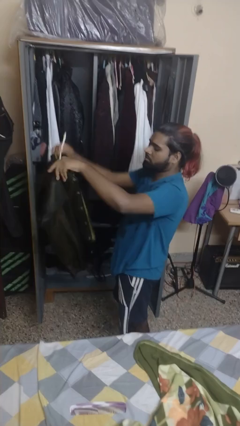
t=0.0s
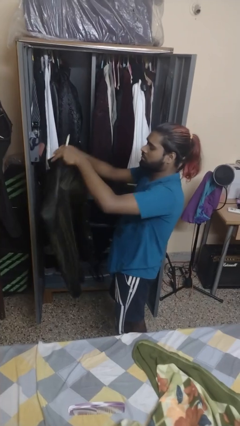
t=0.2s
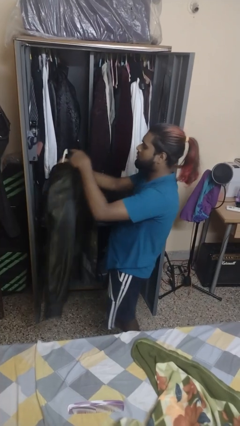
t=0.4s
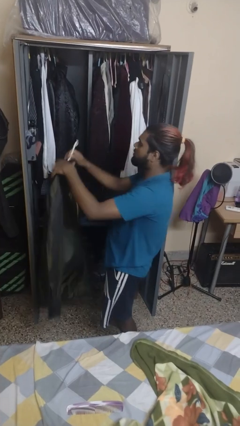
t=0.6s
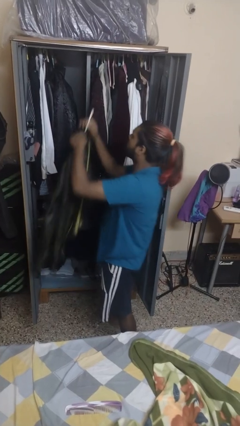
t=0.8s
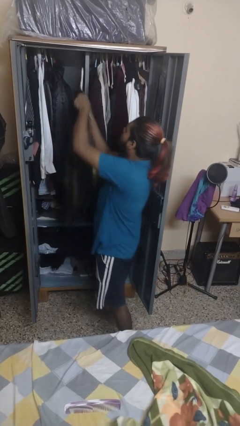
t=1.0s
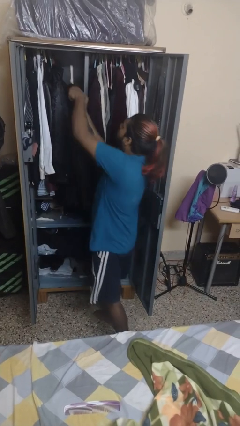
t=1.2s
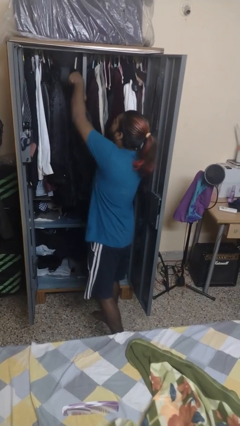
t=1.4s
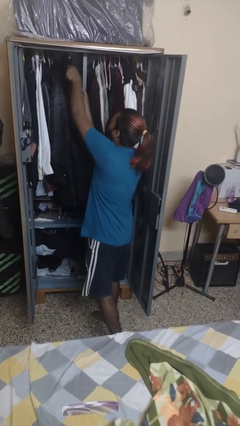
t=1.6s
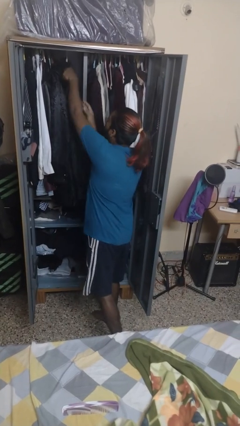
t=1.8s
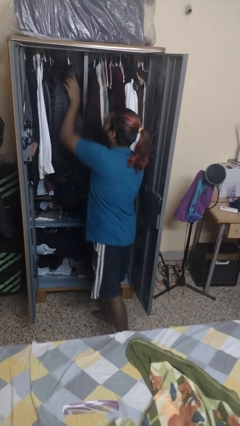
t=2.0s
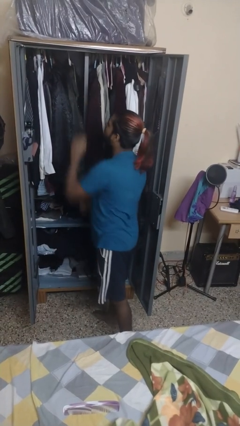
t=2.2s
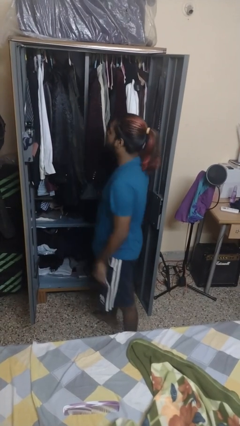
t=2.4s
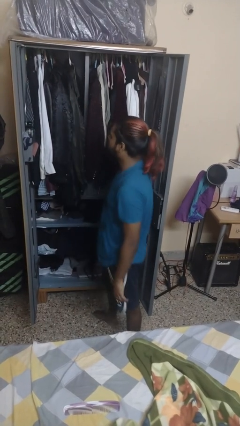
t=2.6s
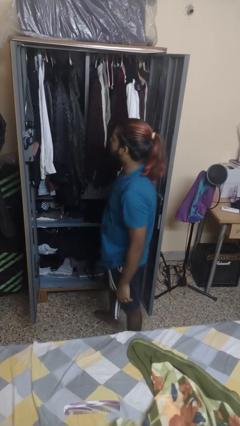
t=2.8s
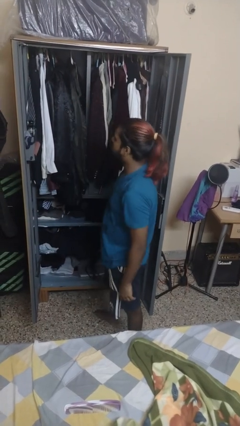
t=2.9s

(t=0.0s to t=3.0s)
person puts clothes into dresser

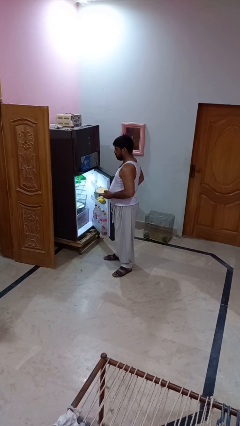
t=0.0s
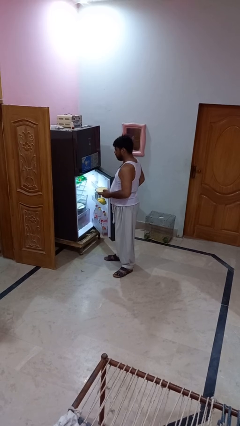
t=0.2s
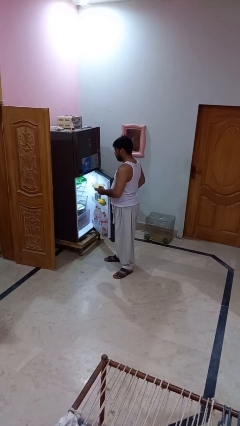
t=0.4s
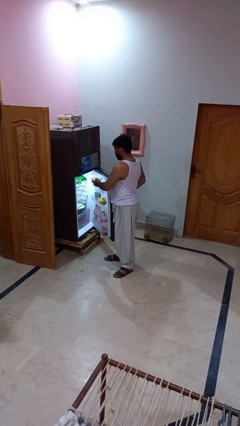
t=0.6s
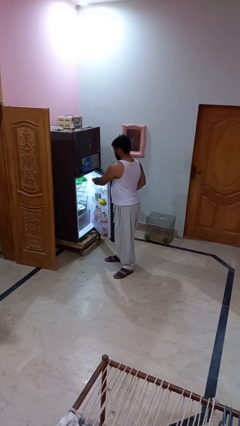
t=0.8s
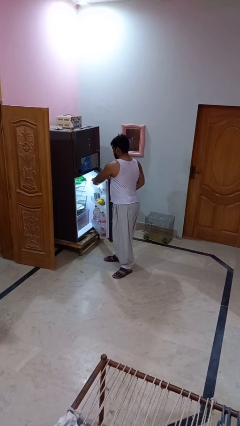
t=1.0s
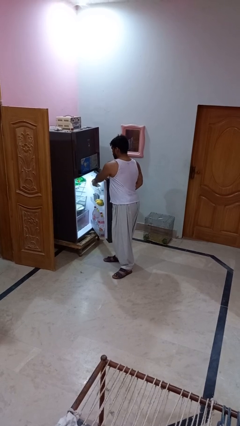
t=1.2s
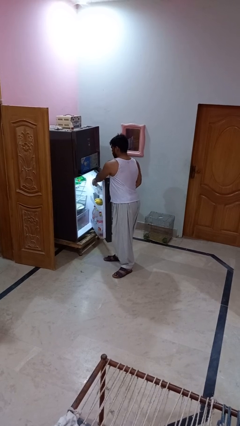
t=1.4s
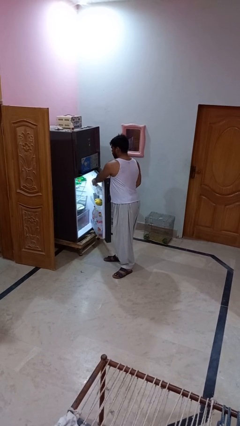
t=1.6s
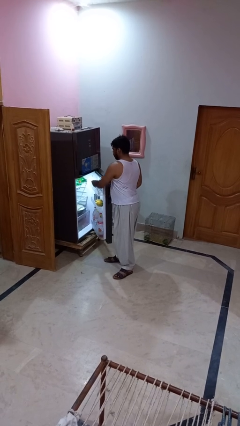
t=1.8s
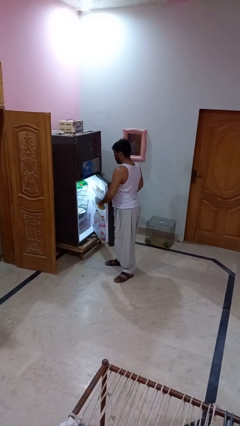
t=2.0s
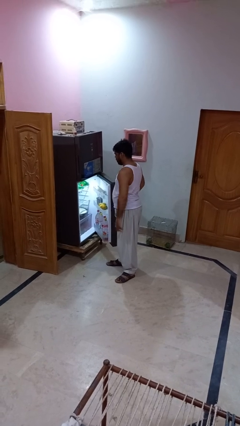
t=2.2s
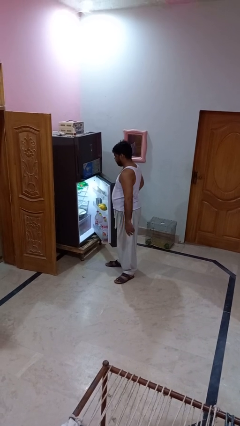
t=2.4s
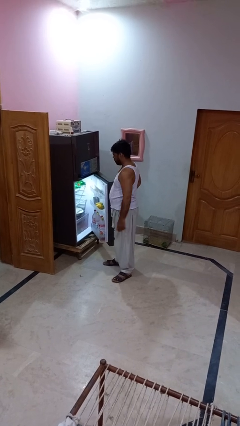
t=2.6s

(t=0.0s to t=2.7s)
person puts object into refrigerator

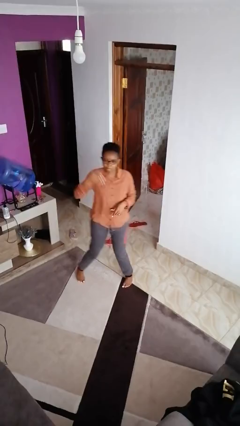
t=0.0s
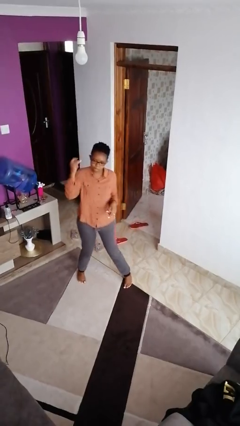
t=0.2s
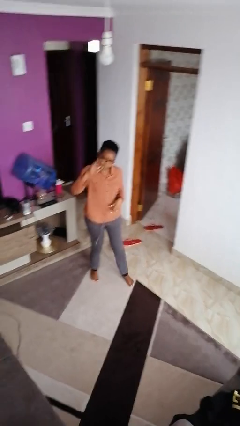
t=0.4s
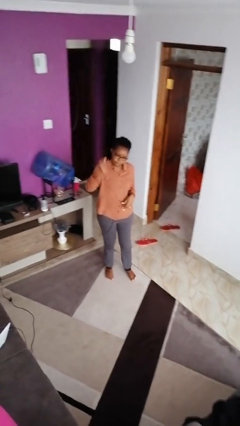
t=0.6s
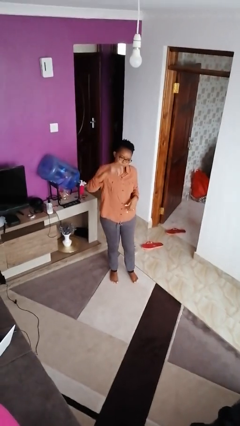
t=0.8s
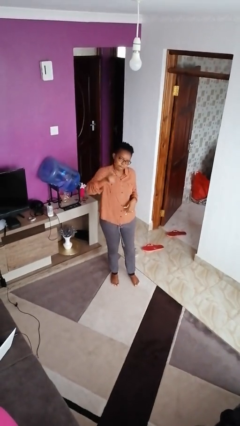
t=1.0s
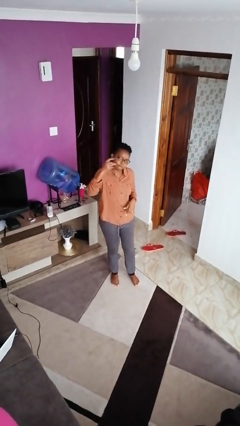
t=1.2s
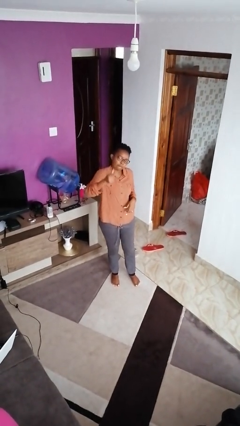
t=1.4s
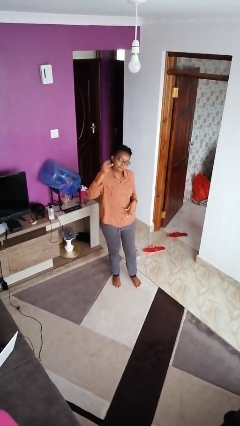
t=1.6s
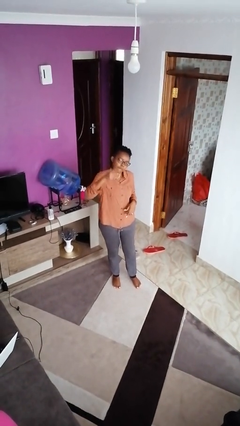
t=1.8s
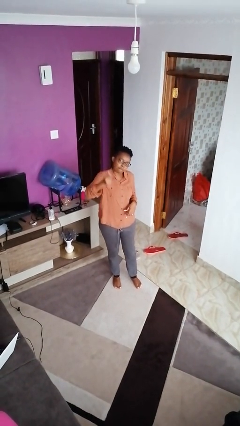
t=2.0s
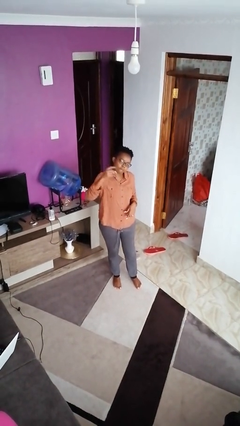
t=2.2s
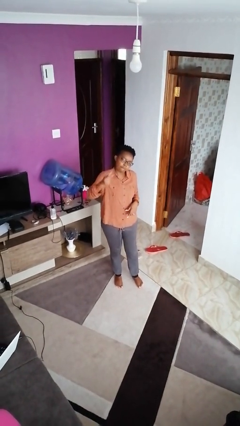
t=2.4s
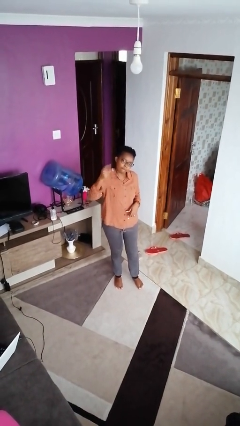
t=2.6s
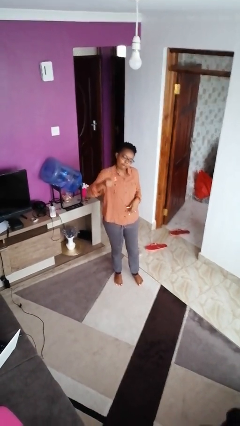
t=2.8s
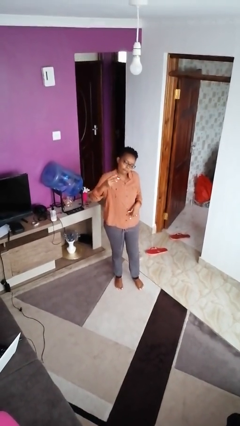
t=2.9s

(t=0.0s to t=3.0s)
person snaps fingers

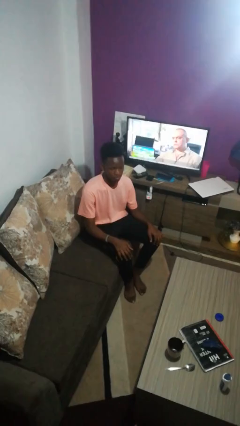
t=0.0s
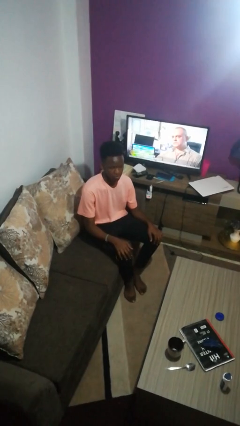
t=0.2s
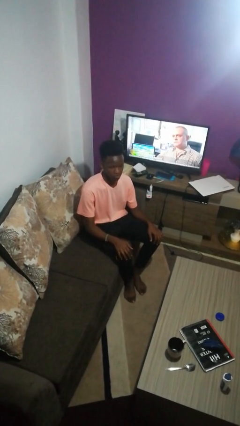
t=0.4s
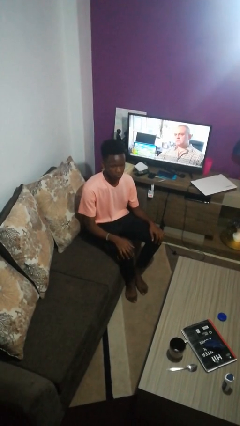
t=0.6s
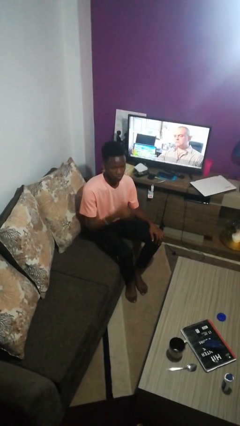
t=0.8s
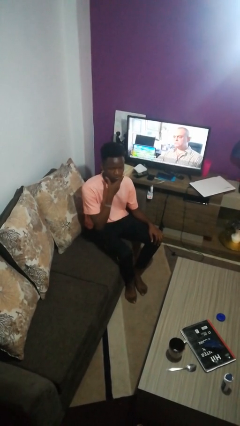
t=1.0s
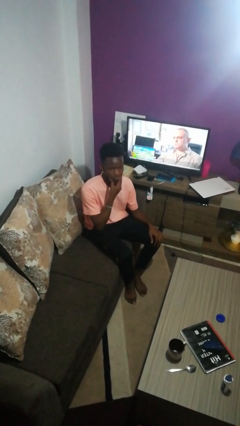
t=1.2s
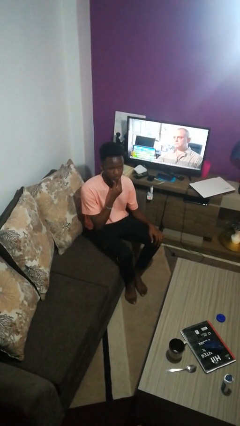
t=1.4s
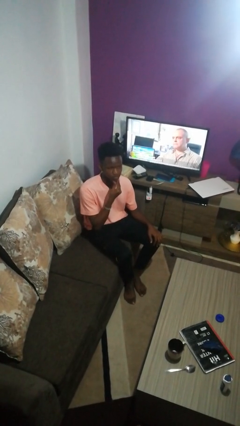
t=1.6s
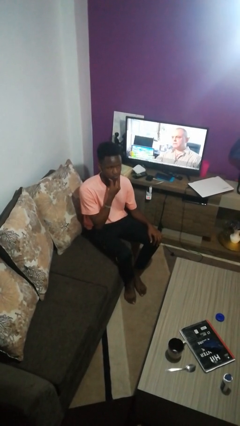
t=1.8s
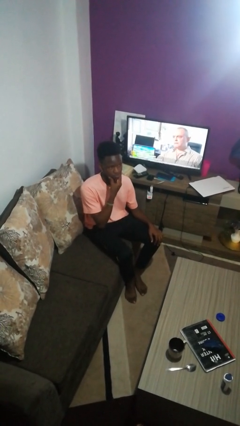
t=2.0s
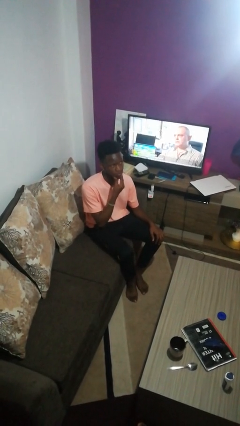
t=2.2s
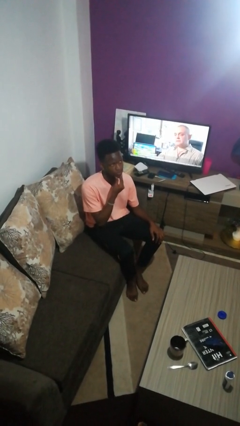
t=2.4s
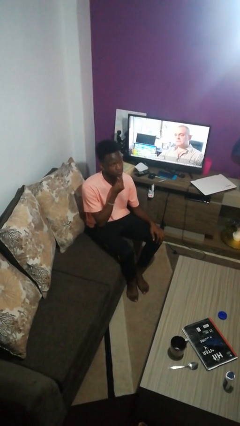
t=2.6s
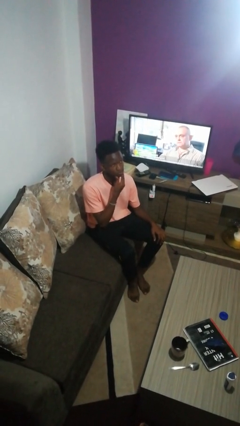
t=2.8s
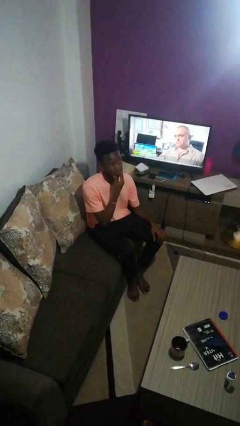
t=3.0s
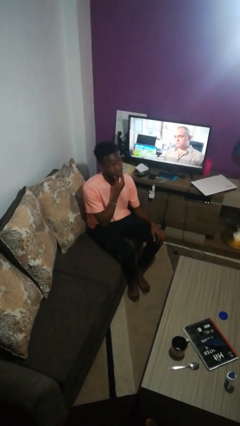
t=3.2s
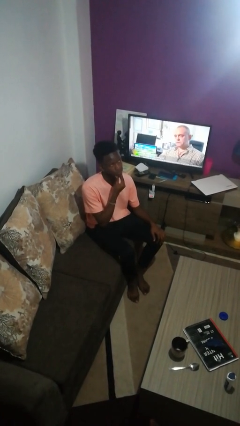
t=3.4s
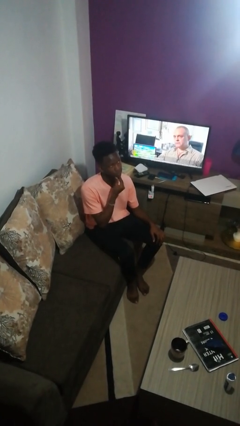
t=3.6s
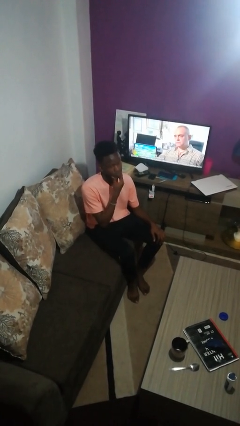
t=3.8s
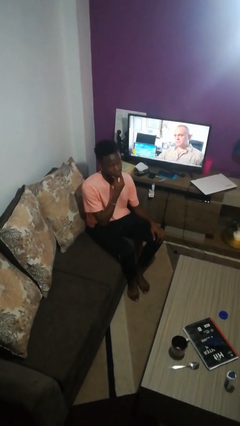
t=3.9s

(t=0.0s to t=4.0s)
person strokes chin

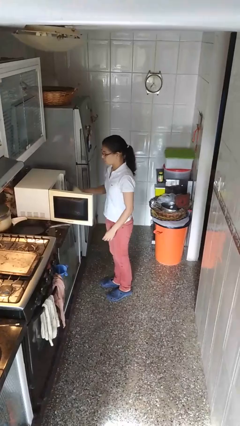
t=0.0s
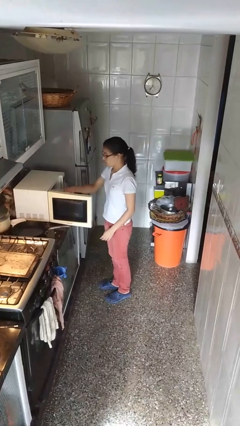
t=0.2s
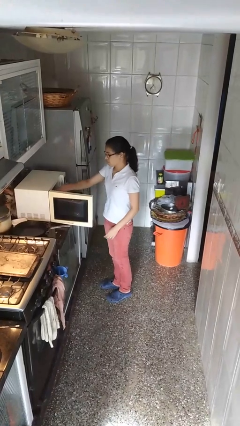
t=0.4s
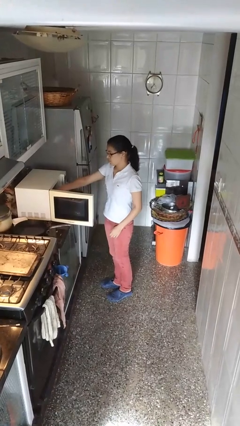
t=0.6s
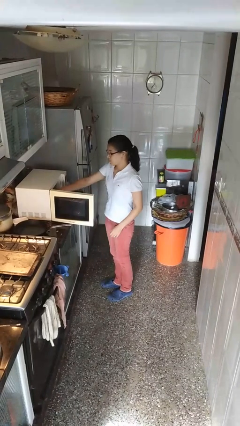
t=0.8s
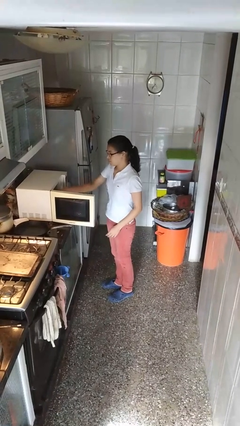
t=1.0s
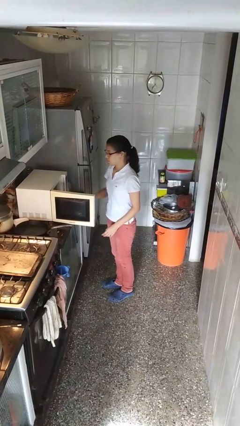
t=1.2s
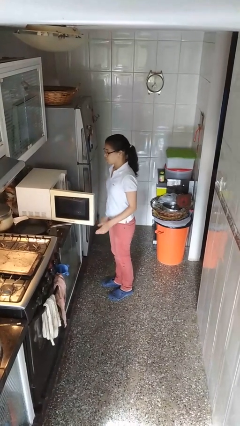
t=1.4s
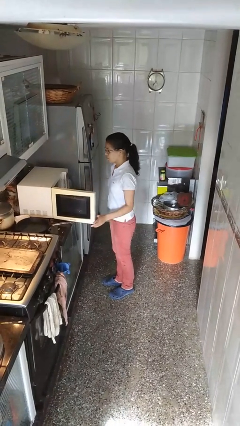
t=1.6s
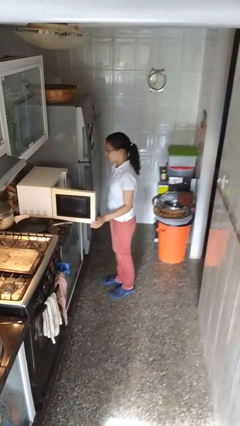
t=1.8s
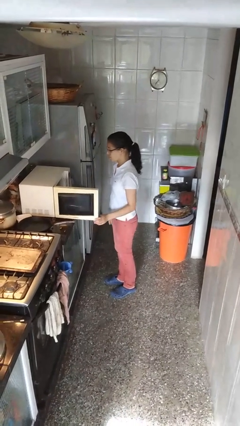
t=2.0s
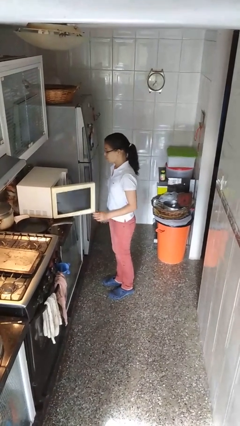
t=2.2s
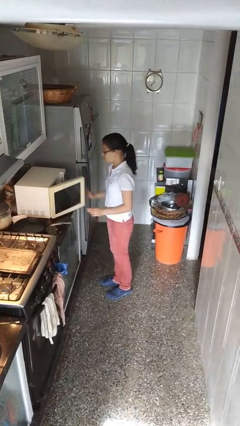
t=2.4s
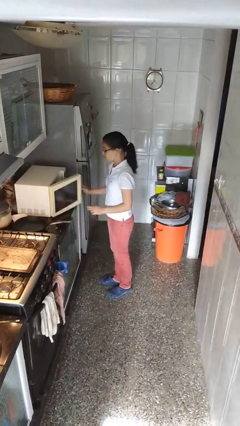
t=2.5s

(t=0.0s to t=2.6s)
person puts object into microwave

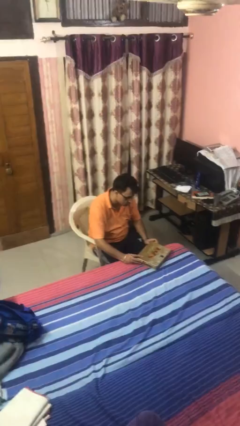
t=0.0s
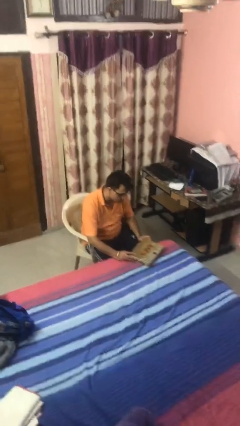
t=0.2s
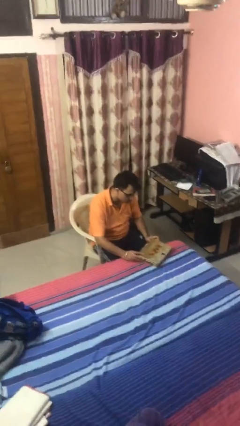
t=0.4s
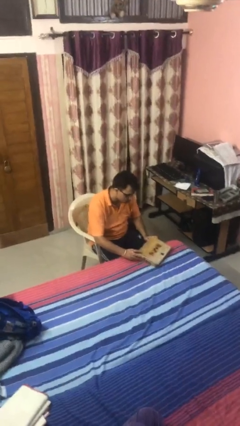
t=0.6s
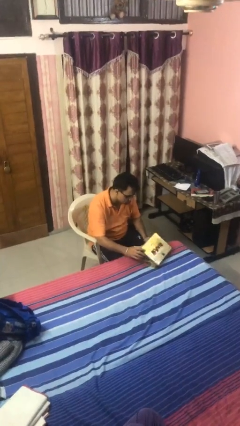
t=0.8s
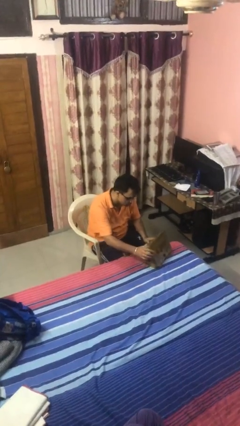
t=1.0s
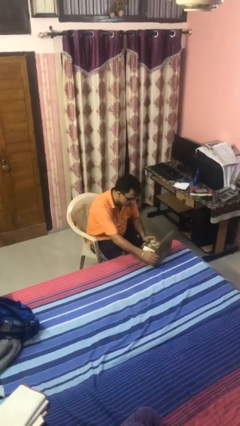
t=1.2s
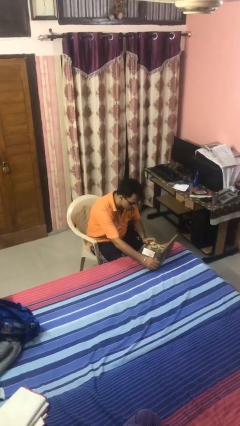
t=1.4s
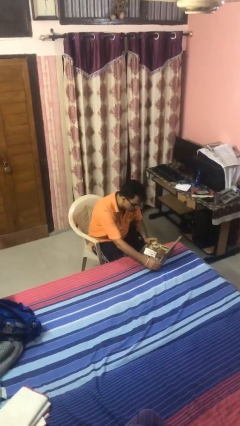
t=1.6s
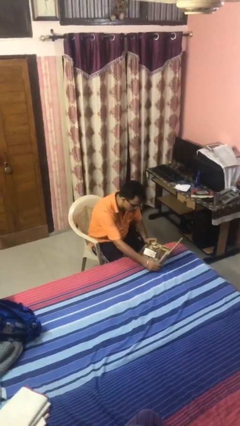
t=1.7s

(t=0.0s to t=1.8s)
person opens jewelry box

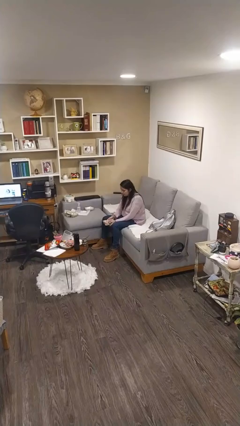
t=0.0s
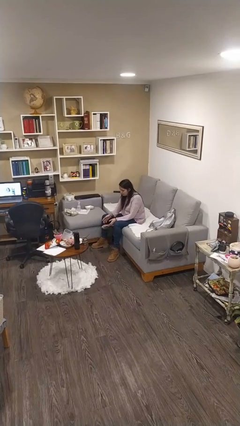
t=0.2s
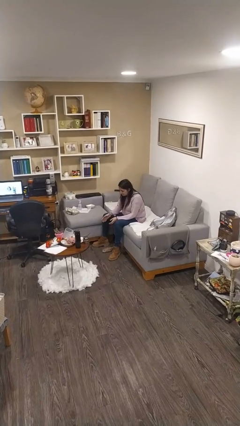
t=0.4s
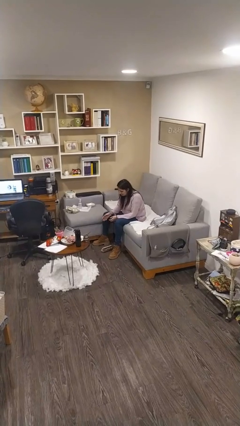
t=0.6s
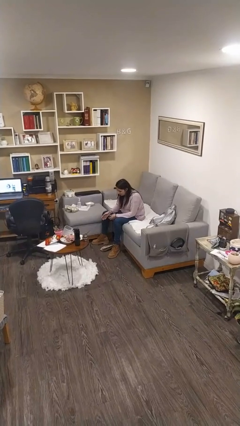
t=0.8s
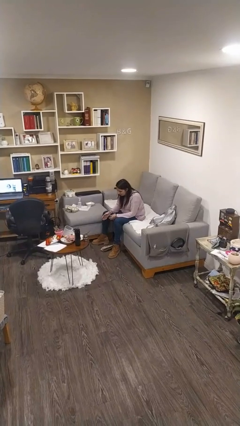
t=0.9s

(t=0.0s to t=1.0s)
person drops object
